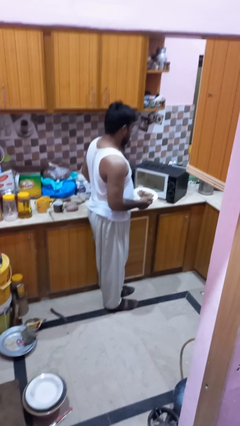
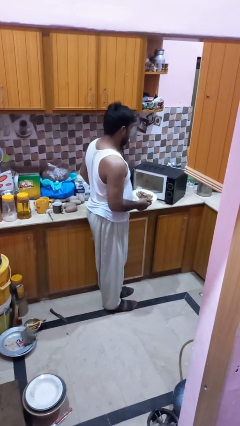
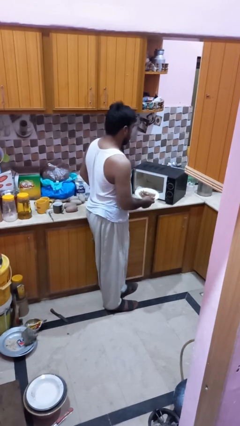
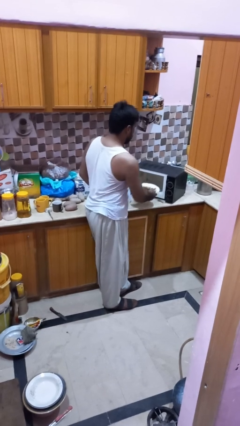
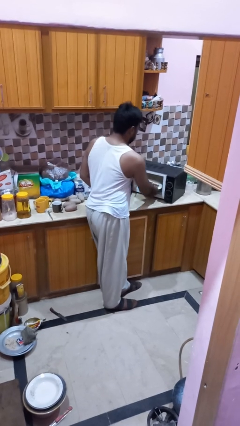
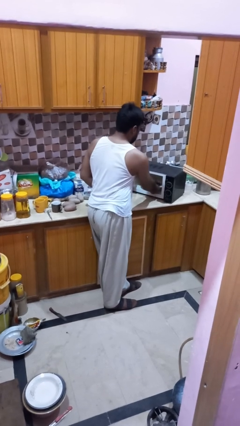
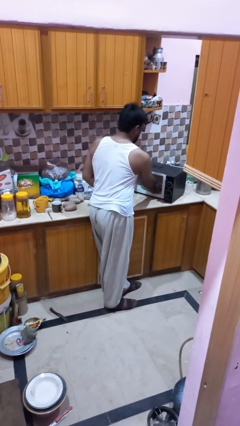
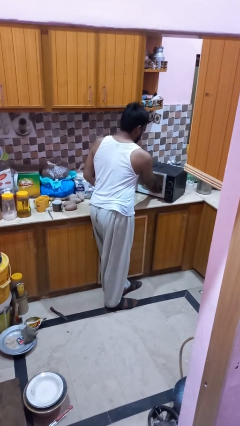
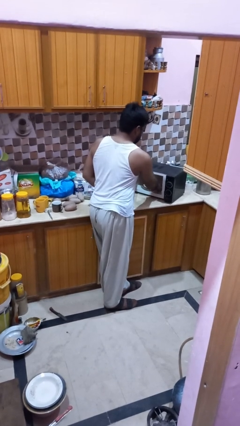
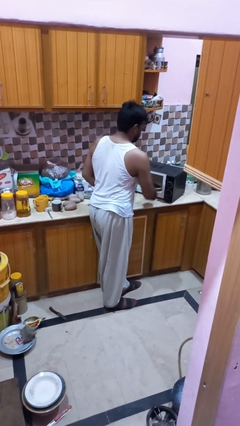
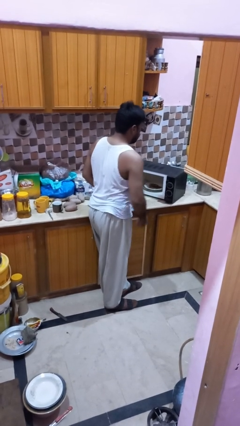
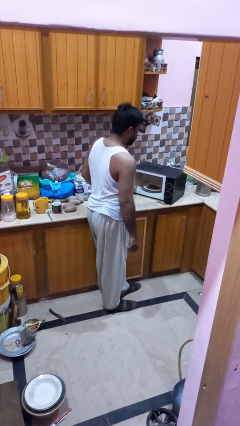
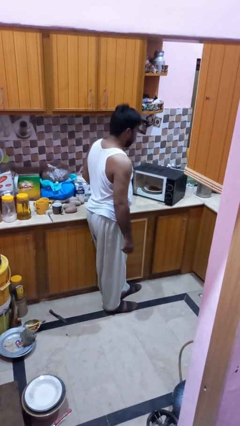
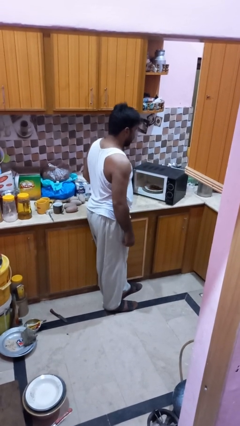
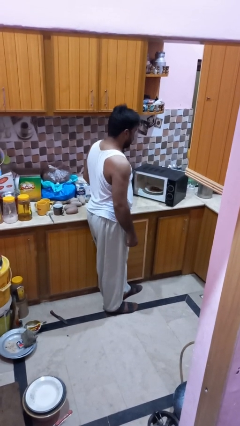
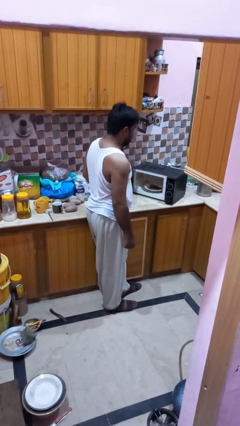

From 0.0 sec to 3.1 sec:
person puts object into microwave

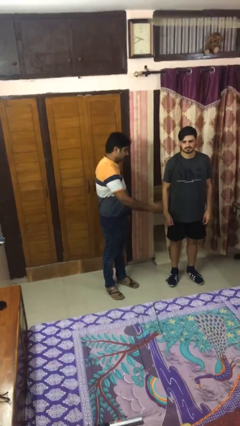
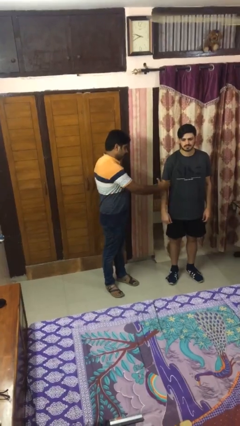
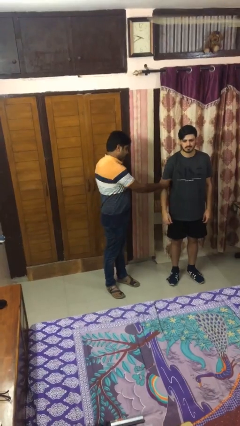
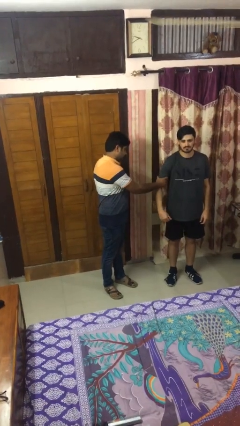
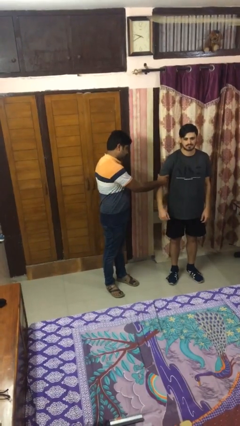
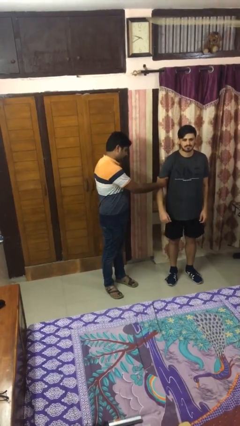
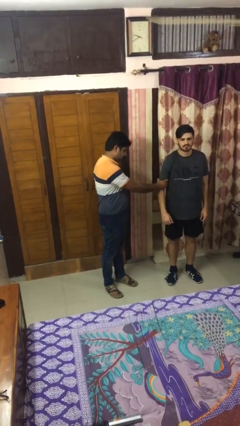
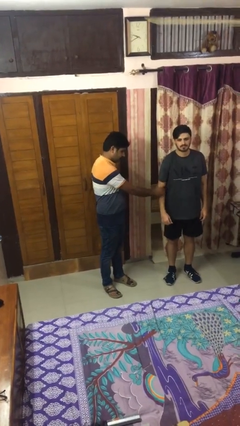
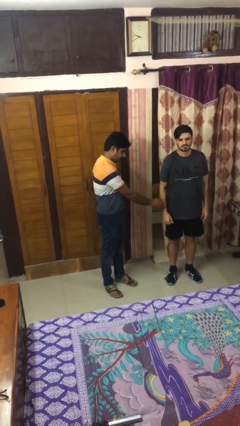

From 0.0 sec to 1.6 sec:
person grabs person by bicep

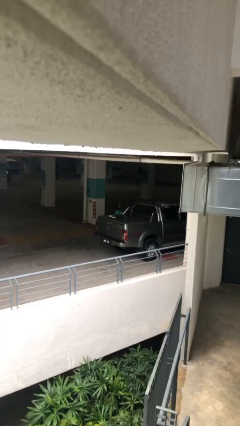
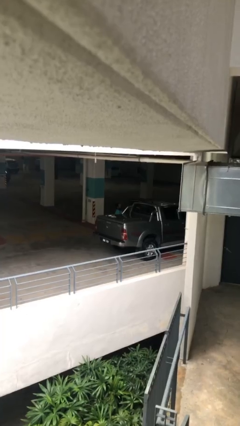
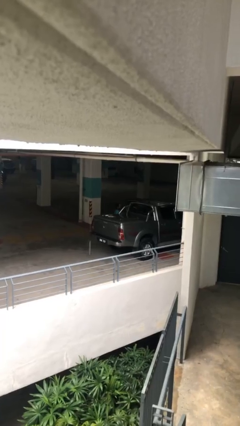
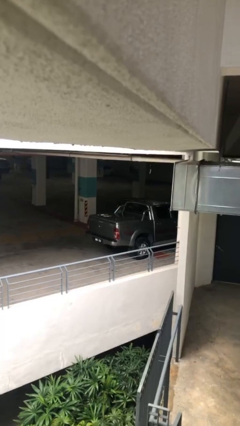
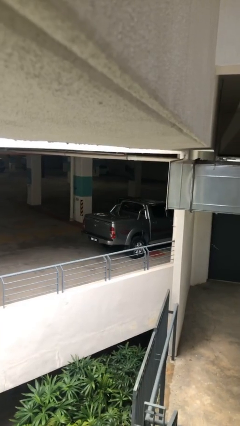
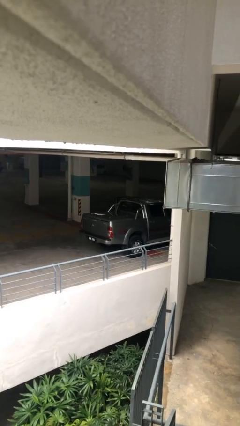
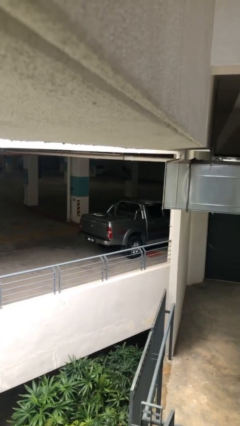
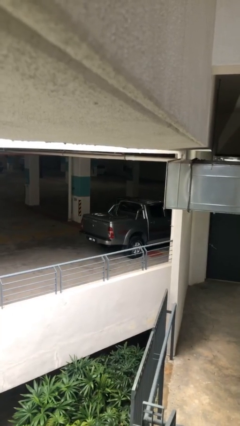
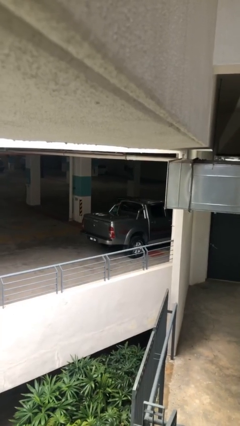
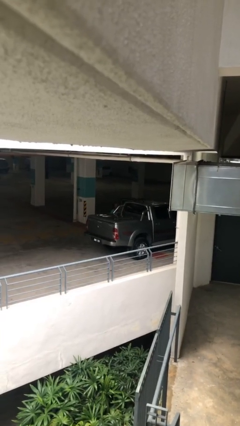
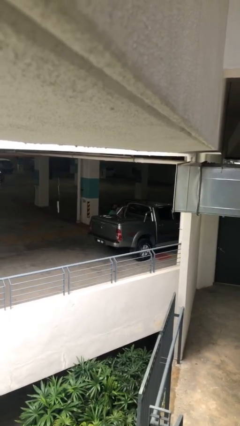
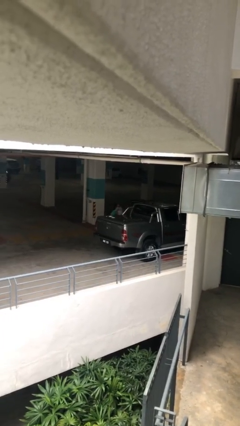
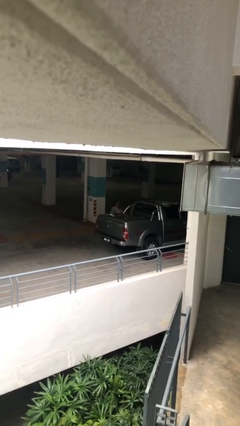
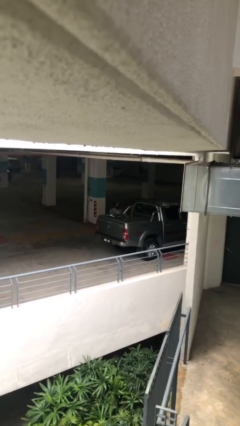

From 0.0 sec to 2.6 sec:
person unloads car

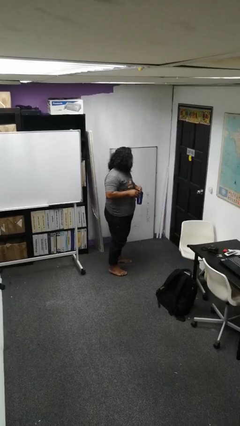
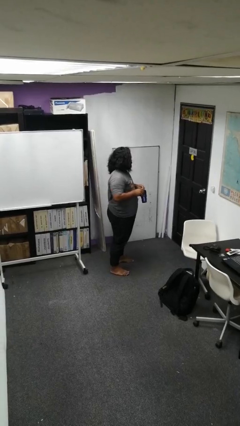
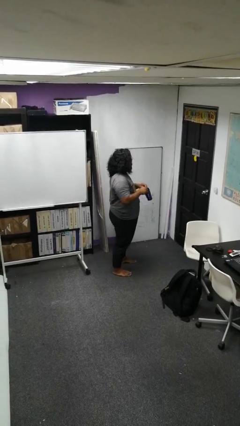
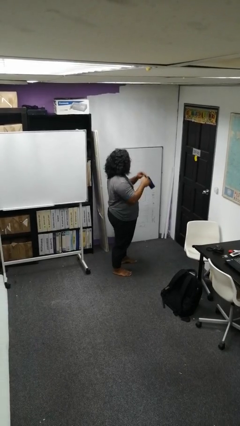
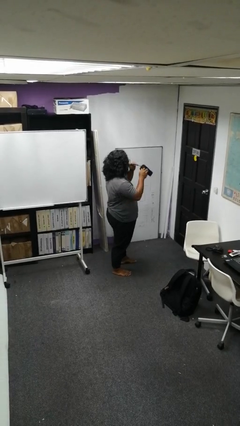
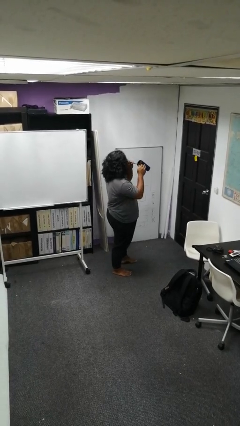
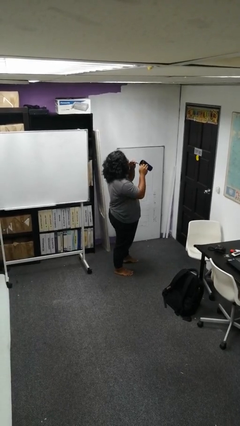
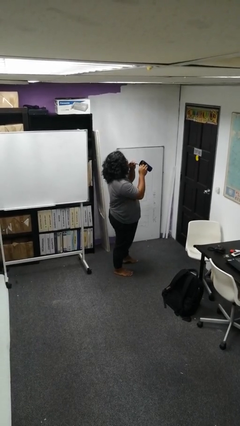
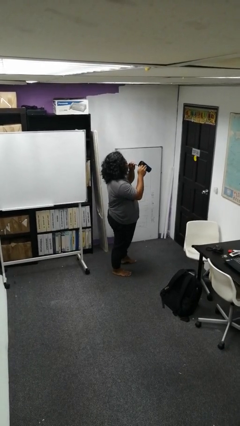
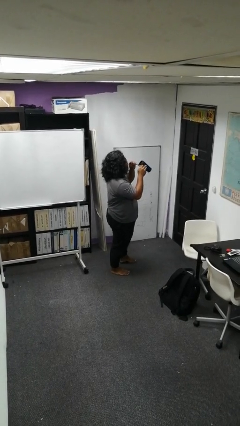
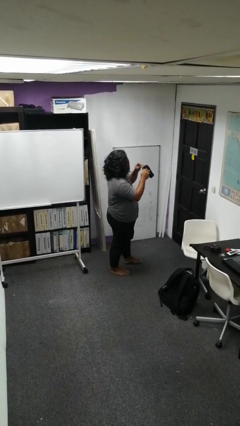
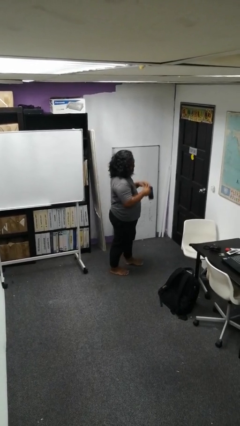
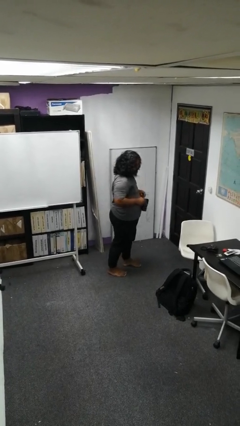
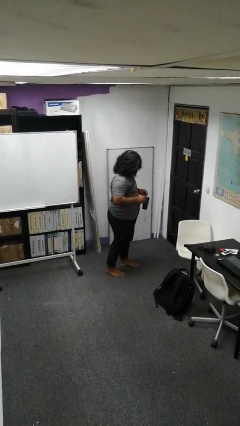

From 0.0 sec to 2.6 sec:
person drinks from straw

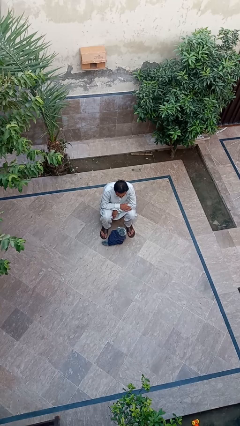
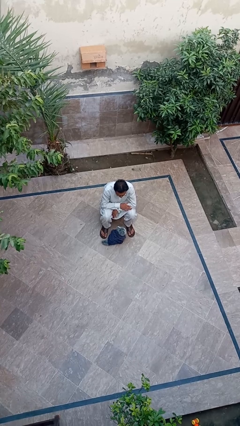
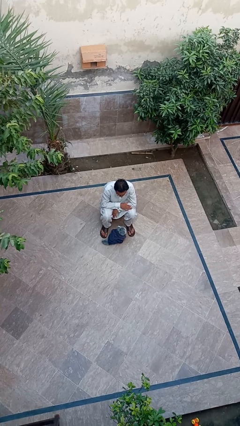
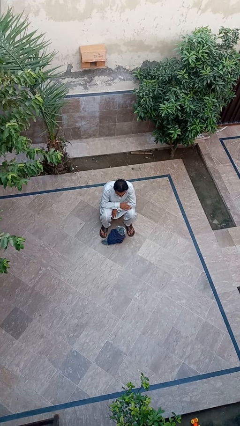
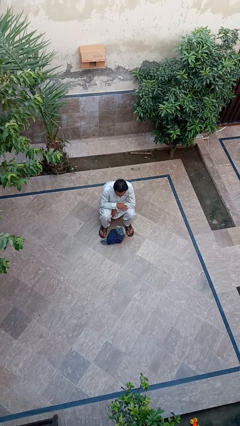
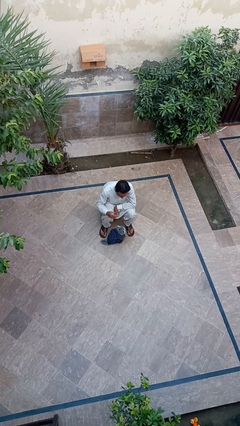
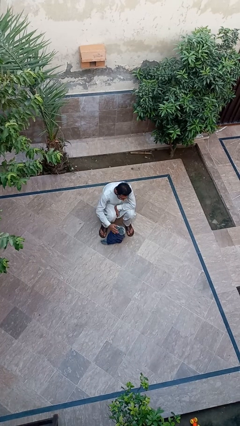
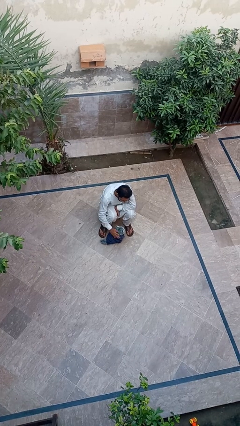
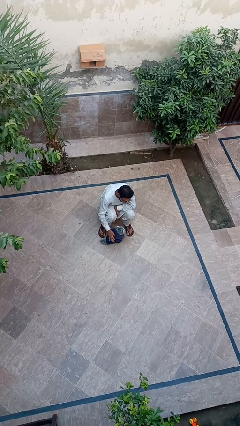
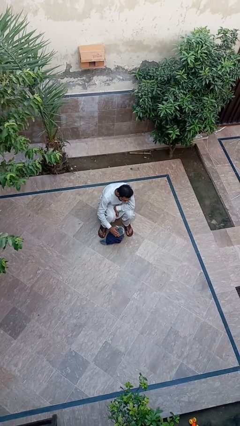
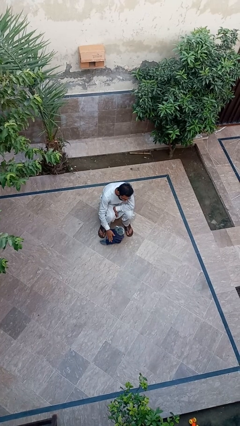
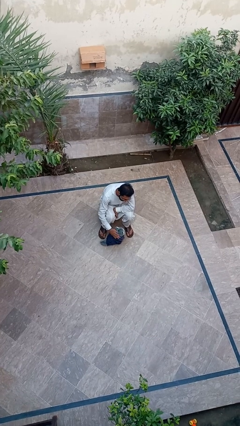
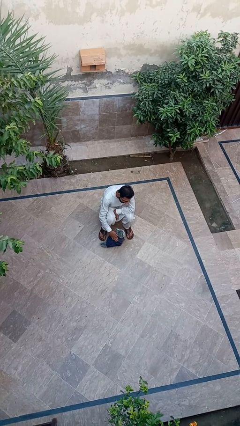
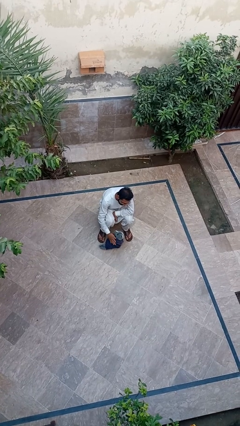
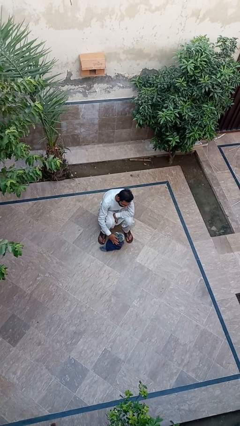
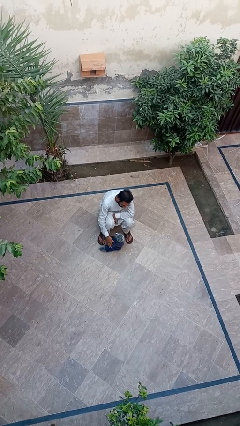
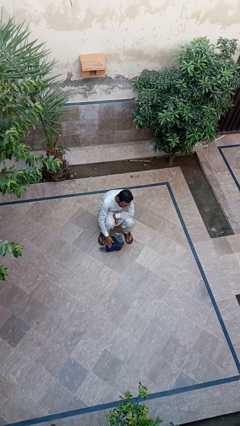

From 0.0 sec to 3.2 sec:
person pets cat

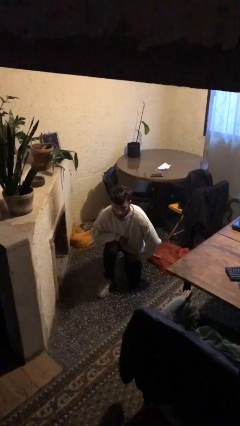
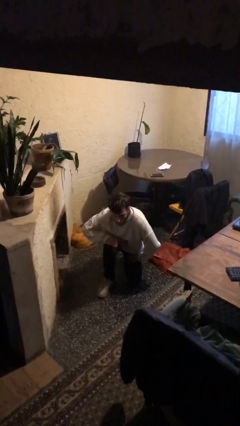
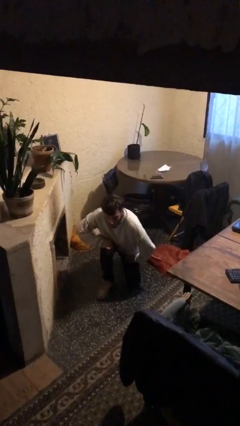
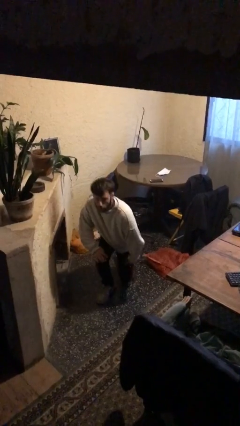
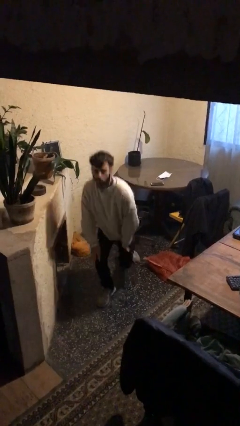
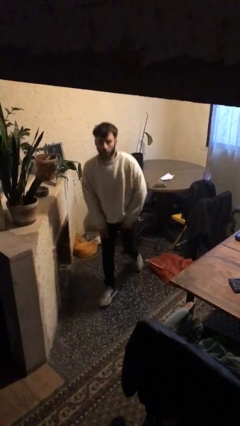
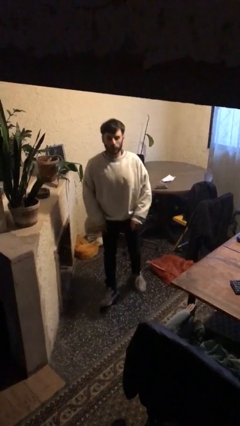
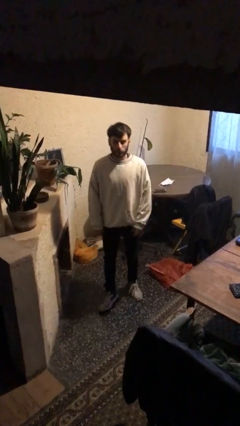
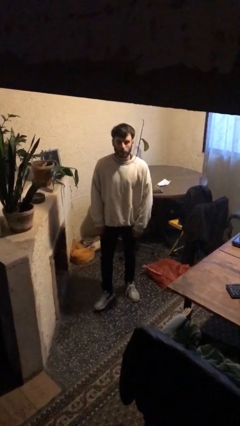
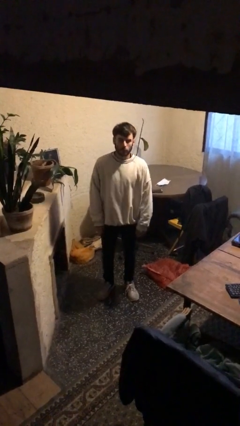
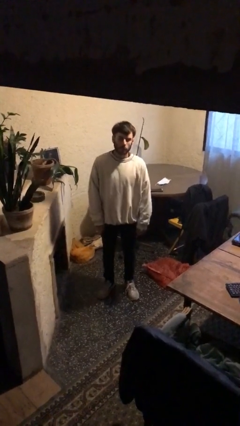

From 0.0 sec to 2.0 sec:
person stands up from floor

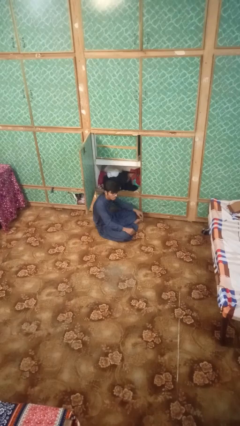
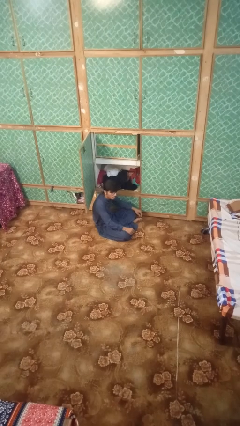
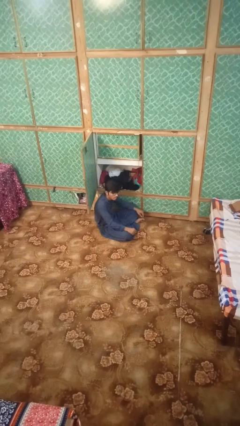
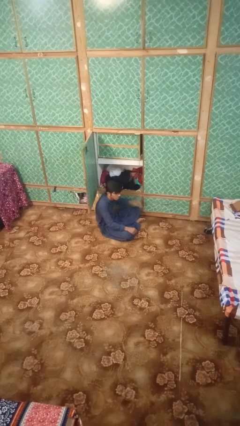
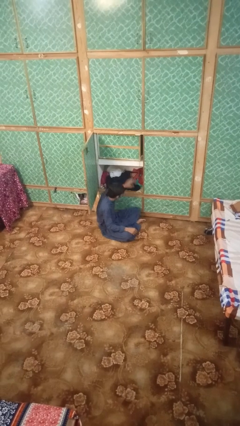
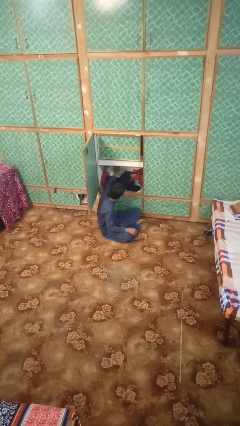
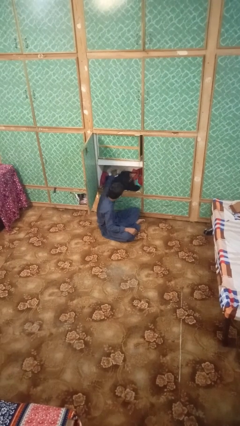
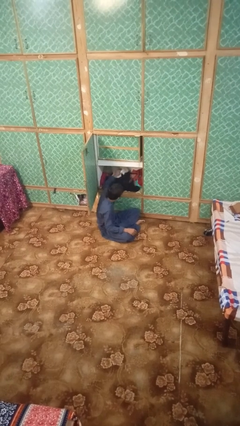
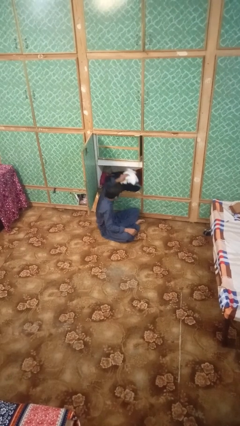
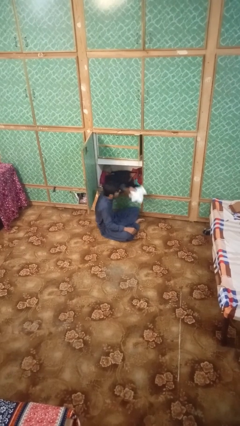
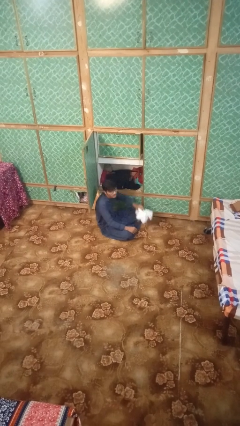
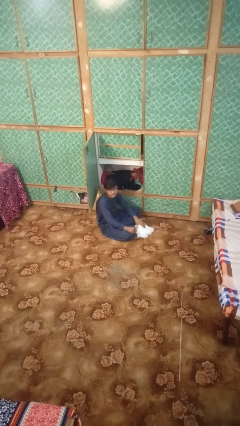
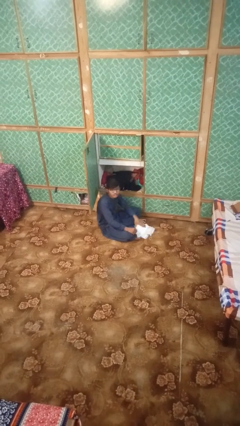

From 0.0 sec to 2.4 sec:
person takes clothes from dresser
